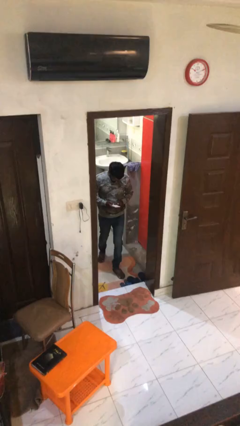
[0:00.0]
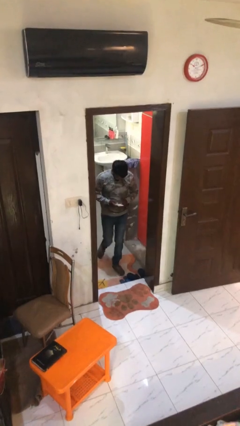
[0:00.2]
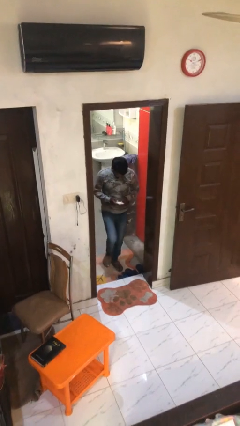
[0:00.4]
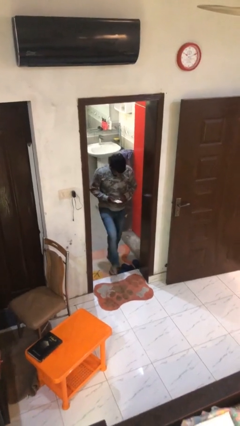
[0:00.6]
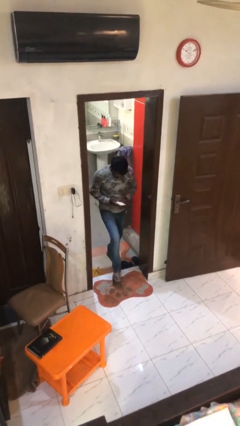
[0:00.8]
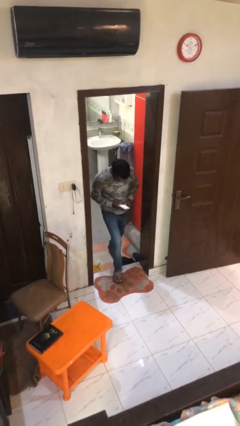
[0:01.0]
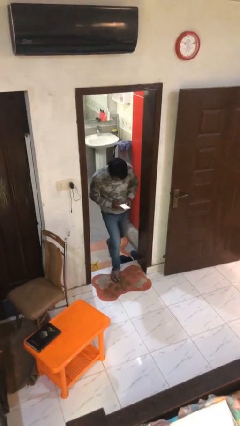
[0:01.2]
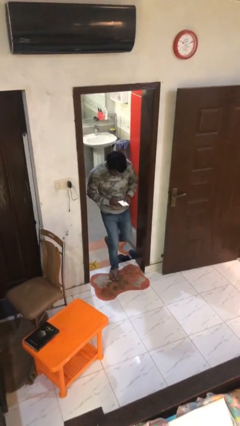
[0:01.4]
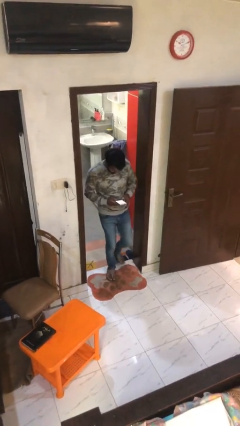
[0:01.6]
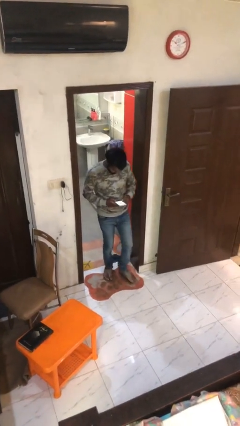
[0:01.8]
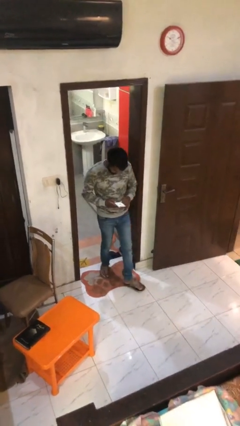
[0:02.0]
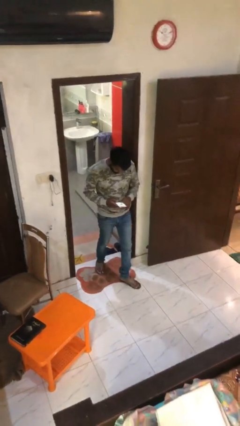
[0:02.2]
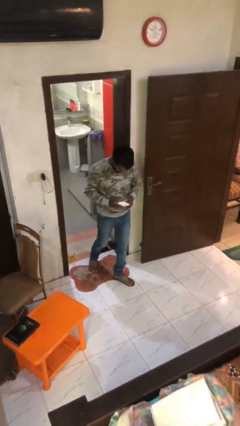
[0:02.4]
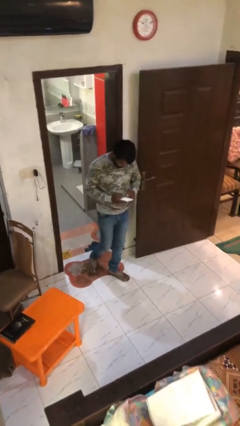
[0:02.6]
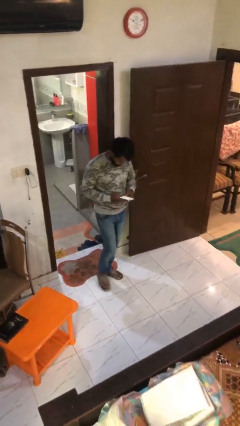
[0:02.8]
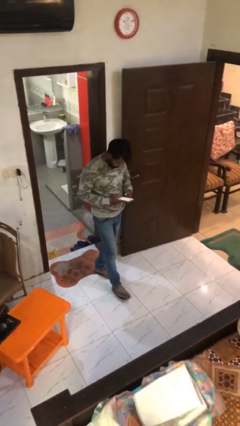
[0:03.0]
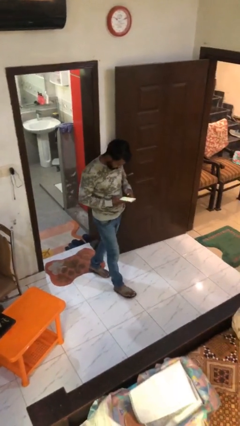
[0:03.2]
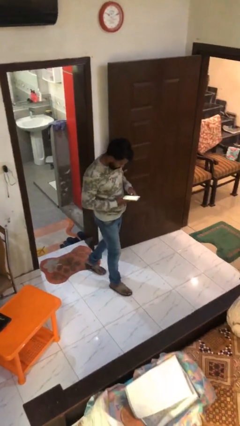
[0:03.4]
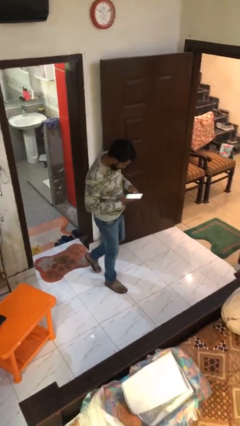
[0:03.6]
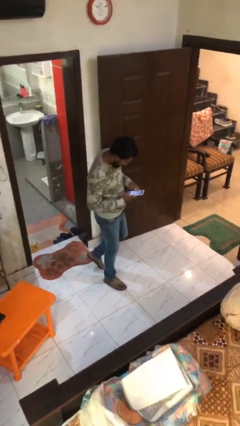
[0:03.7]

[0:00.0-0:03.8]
person texts on phone

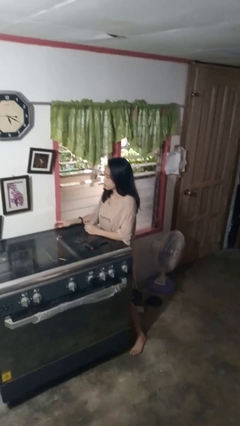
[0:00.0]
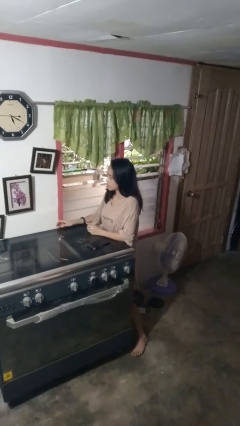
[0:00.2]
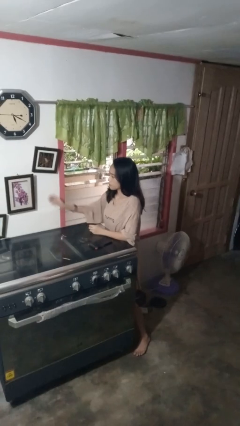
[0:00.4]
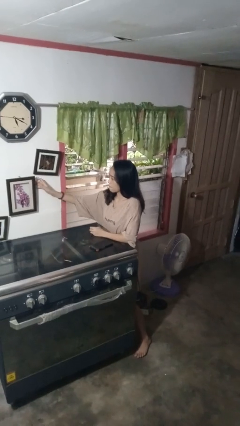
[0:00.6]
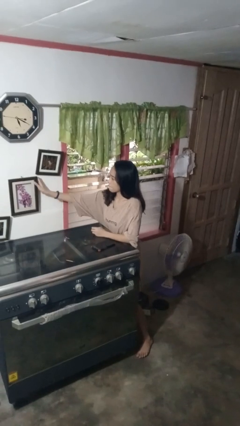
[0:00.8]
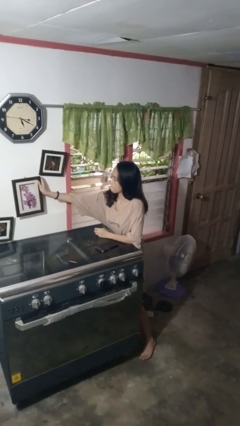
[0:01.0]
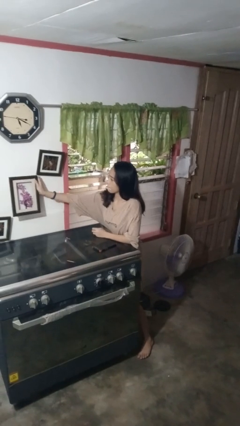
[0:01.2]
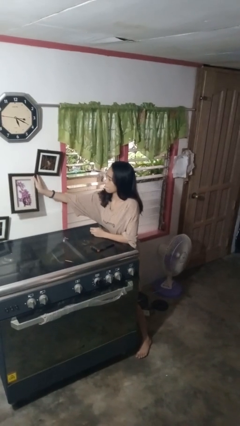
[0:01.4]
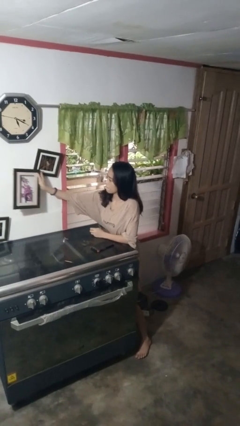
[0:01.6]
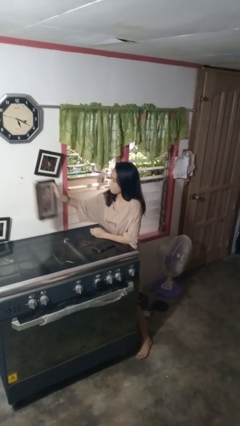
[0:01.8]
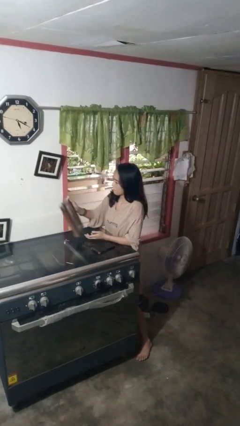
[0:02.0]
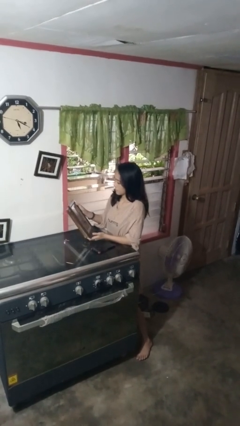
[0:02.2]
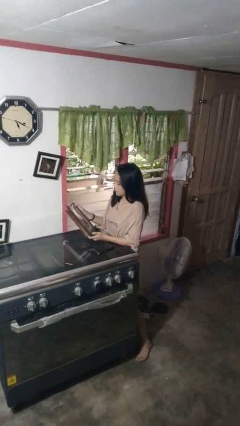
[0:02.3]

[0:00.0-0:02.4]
person takes down picture frame

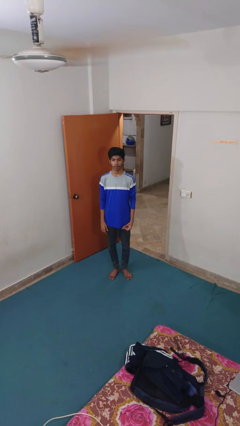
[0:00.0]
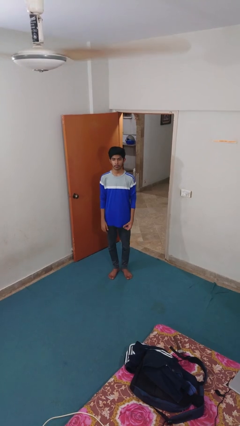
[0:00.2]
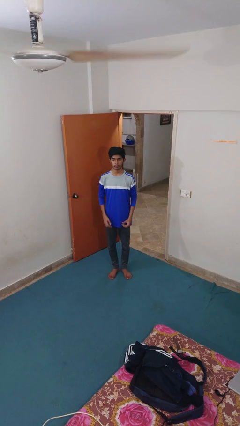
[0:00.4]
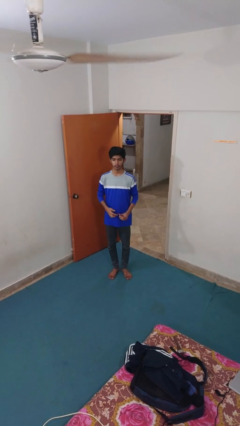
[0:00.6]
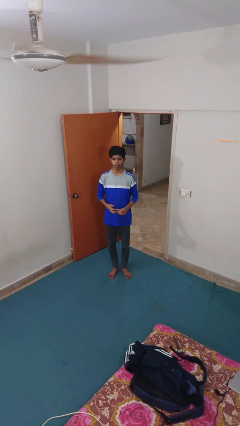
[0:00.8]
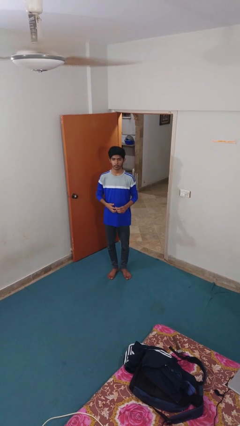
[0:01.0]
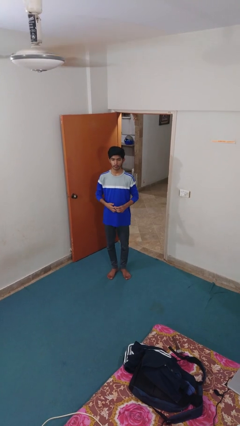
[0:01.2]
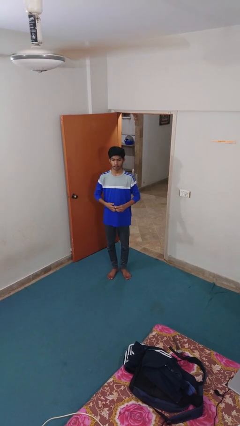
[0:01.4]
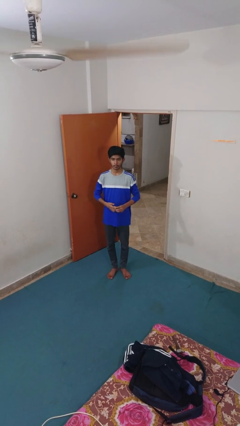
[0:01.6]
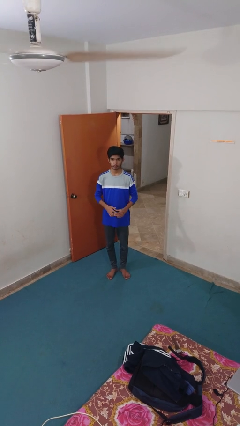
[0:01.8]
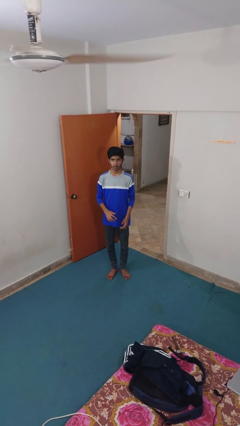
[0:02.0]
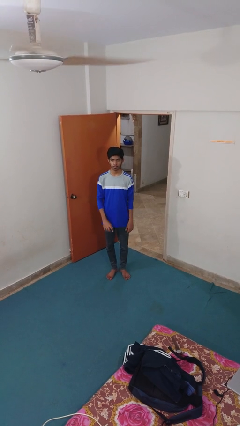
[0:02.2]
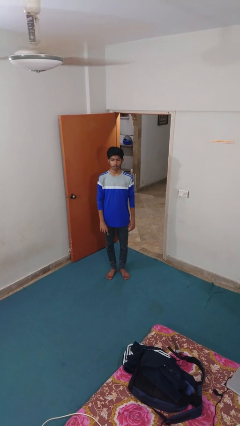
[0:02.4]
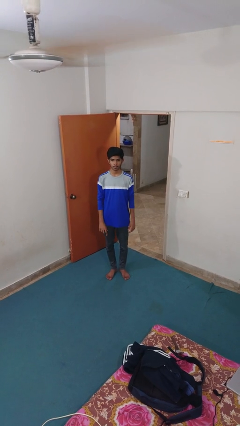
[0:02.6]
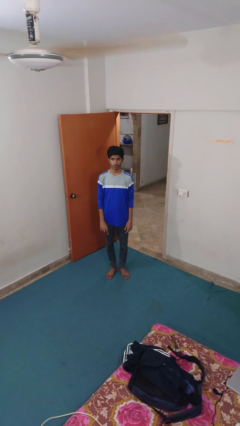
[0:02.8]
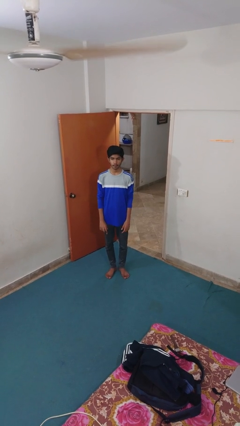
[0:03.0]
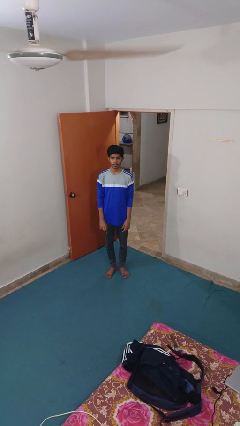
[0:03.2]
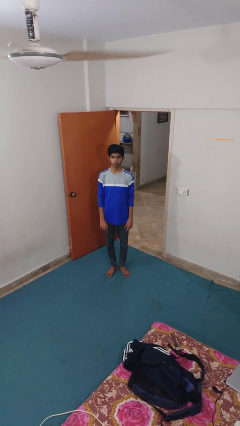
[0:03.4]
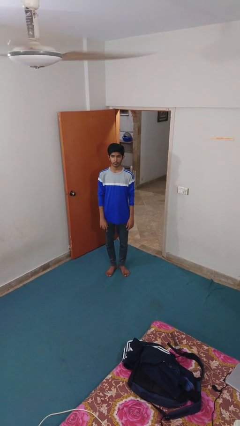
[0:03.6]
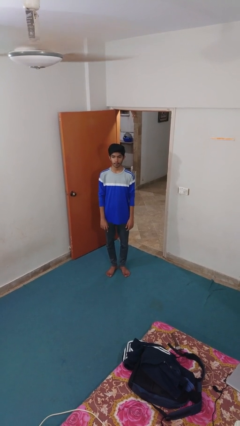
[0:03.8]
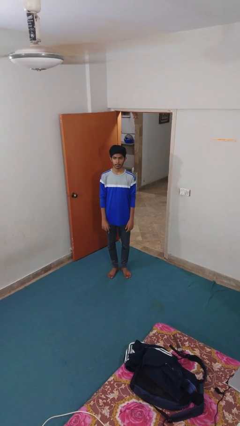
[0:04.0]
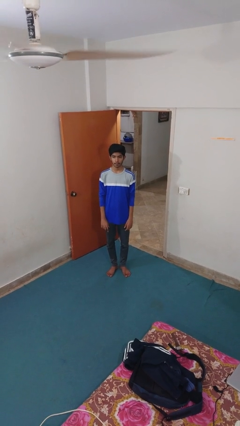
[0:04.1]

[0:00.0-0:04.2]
person puts on ring

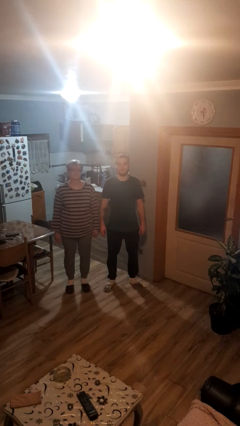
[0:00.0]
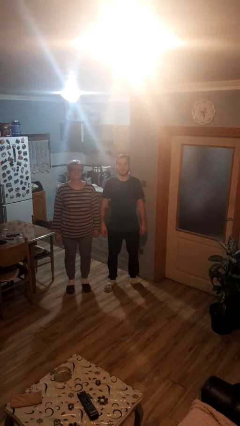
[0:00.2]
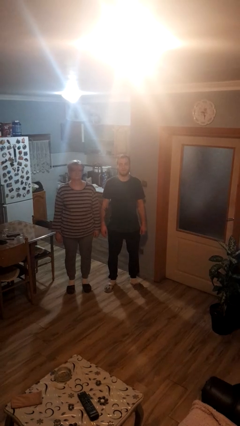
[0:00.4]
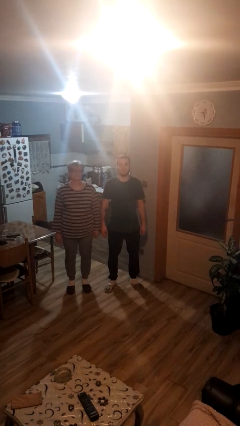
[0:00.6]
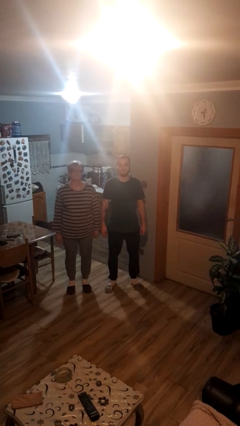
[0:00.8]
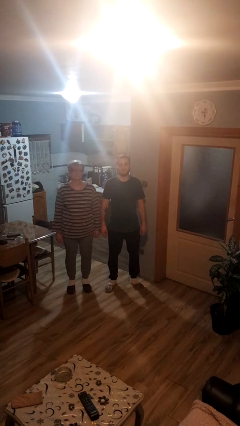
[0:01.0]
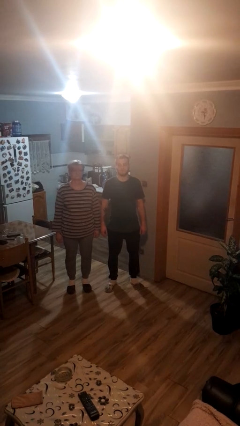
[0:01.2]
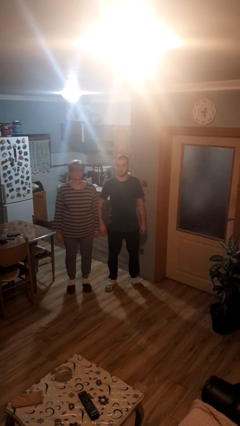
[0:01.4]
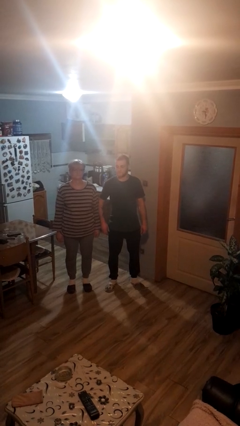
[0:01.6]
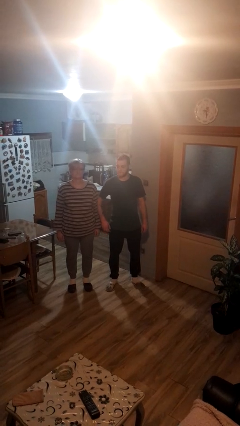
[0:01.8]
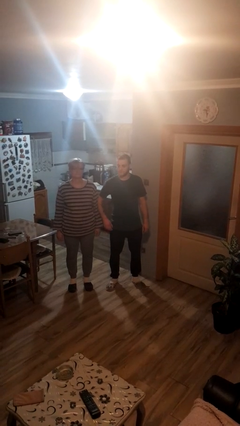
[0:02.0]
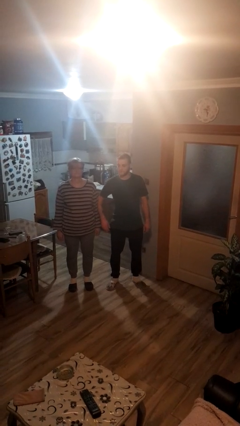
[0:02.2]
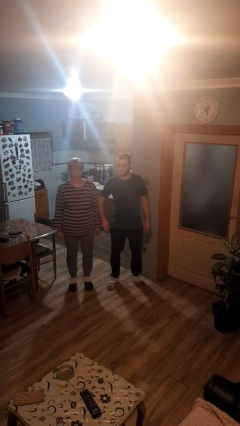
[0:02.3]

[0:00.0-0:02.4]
person nudges person with elbow

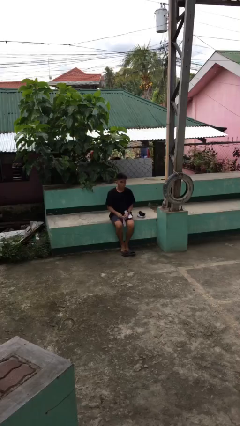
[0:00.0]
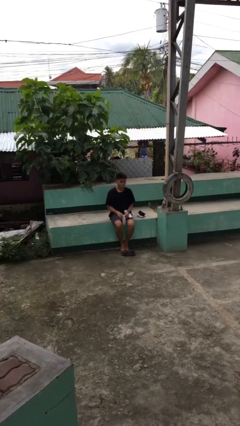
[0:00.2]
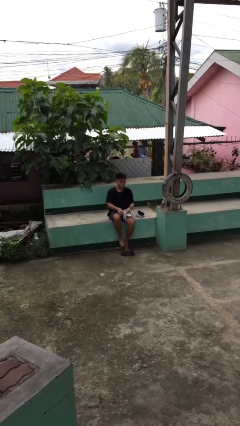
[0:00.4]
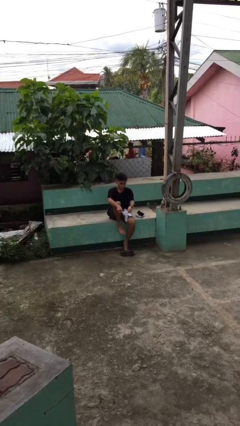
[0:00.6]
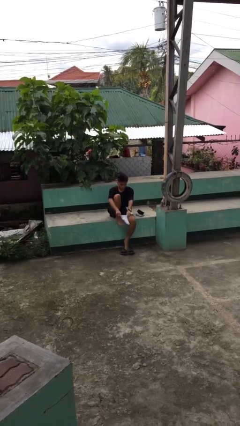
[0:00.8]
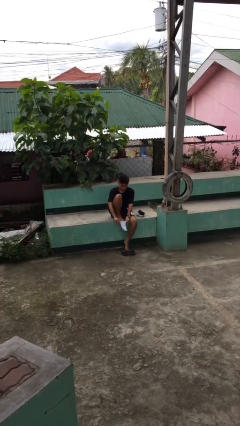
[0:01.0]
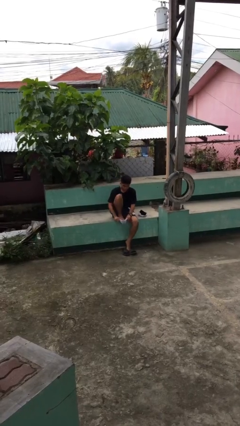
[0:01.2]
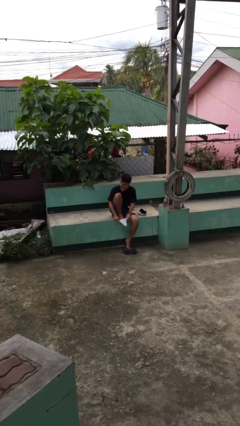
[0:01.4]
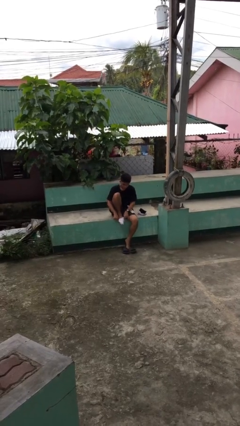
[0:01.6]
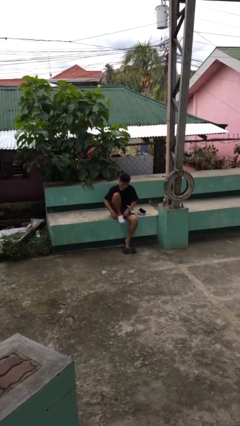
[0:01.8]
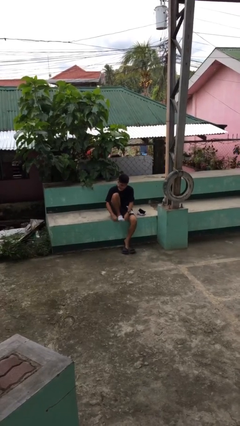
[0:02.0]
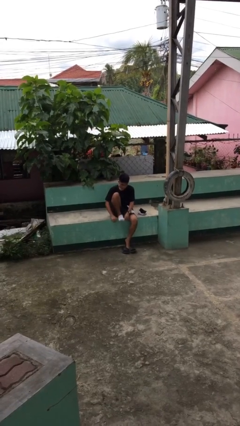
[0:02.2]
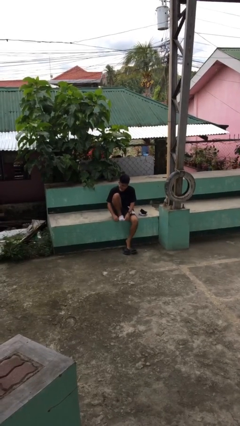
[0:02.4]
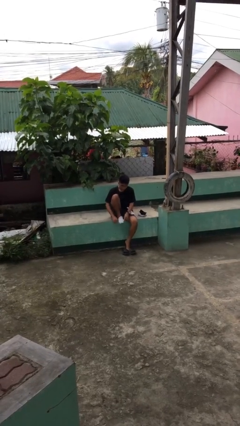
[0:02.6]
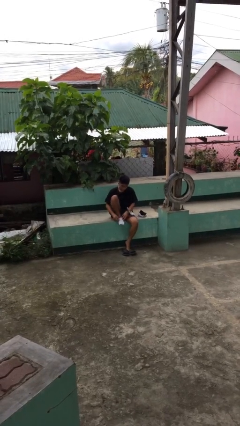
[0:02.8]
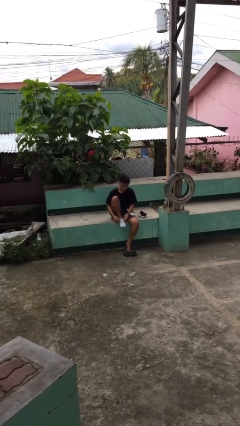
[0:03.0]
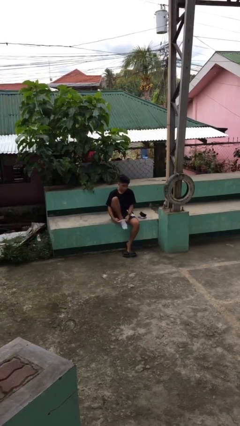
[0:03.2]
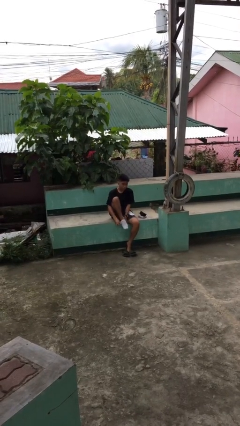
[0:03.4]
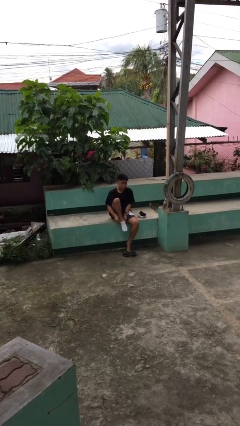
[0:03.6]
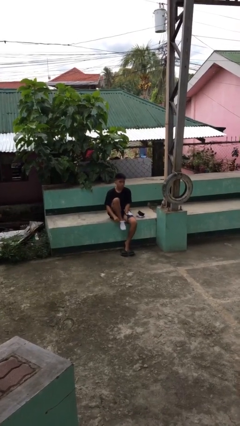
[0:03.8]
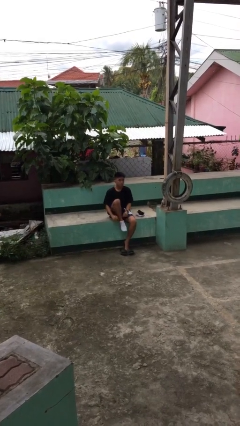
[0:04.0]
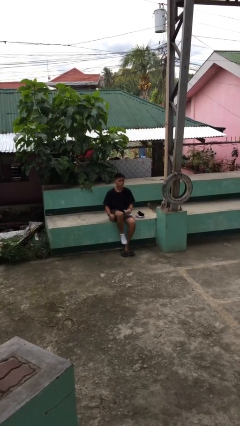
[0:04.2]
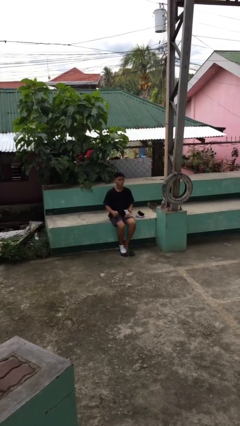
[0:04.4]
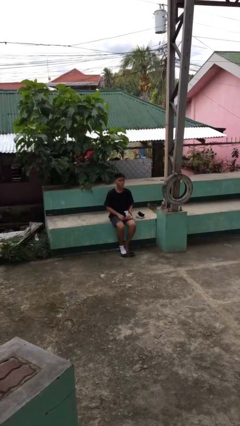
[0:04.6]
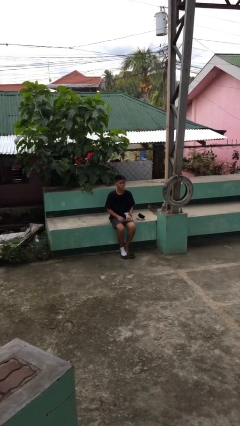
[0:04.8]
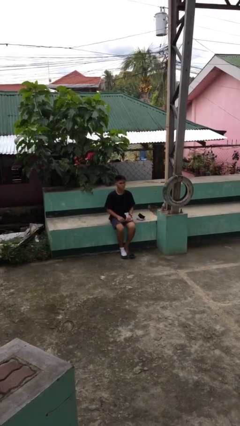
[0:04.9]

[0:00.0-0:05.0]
person puts on socks

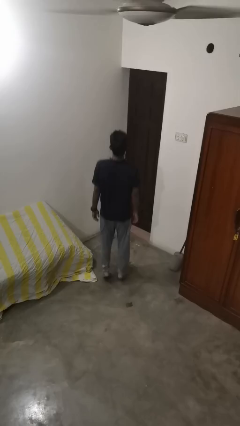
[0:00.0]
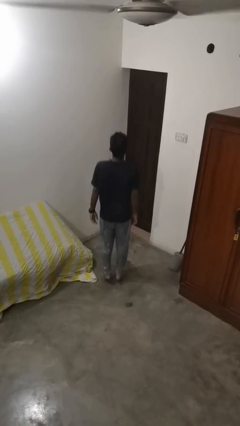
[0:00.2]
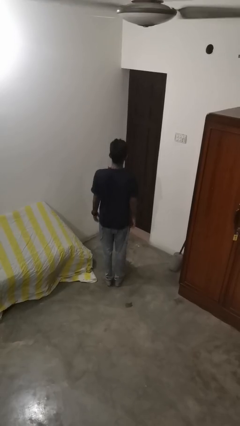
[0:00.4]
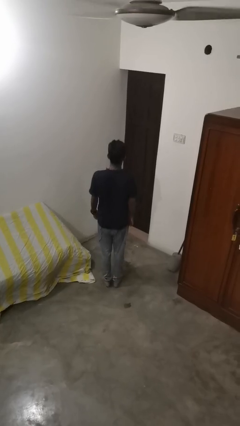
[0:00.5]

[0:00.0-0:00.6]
person jumps
